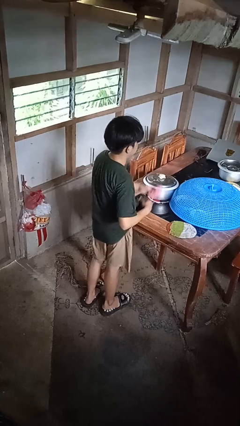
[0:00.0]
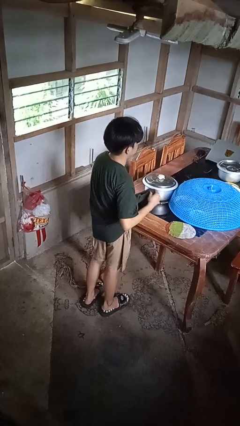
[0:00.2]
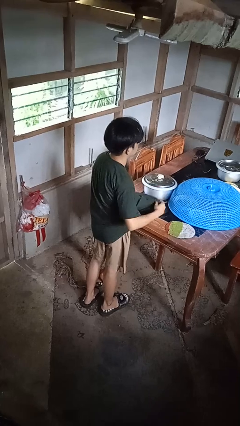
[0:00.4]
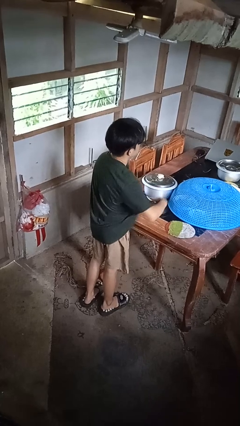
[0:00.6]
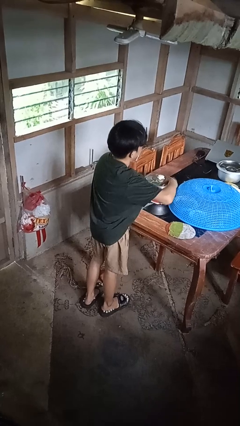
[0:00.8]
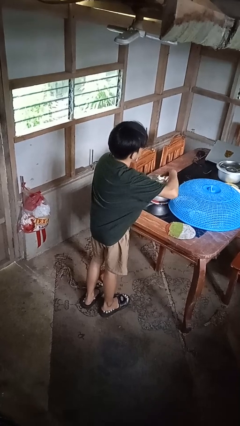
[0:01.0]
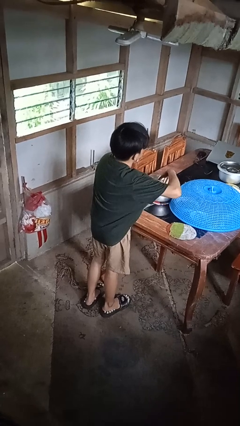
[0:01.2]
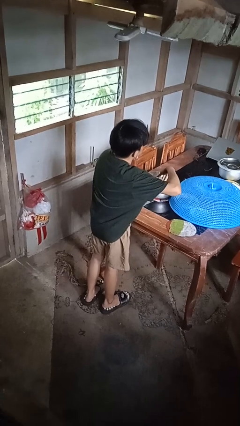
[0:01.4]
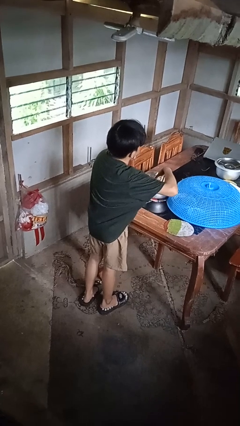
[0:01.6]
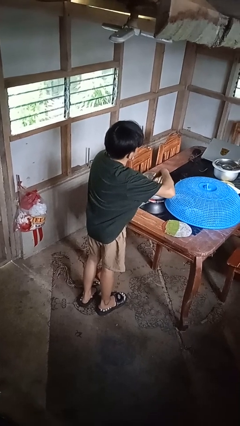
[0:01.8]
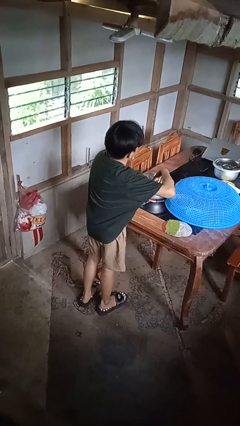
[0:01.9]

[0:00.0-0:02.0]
person applies deodorant

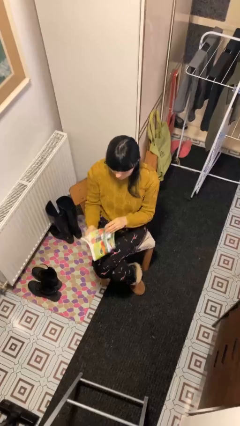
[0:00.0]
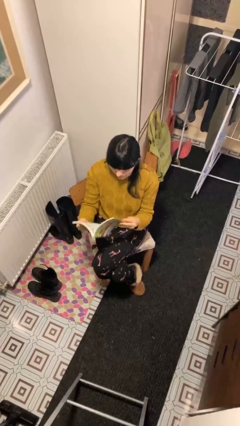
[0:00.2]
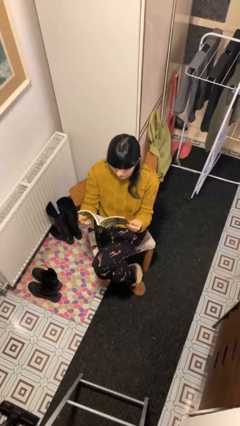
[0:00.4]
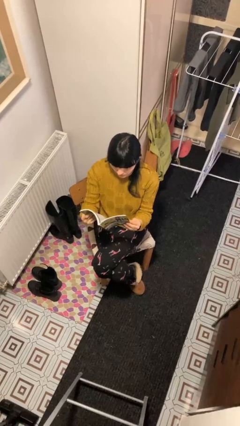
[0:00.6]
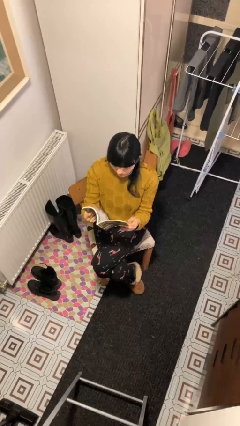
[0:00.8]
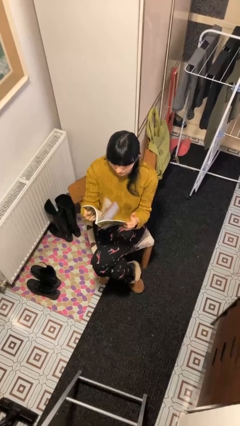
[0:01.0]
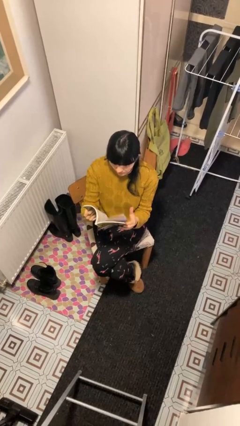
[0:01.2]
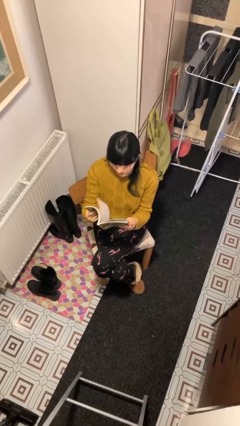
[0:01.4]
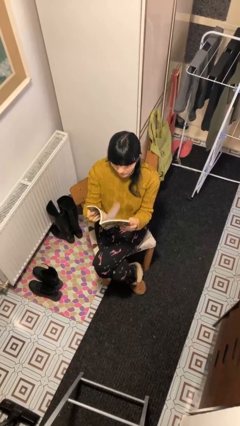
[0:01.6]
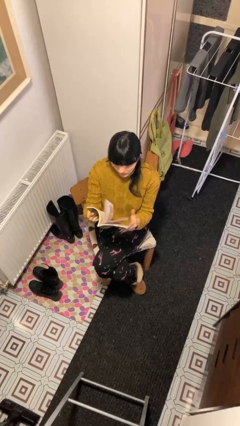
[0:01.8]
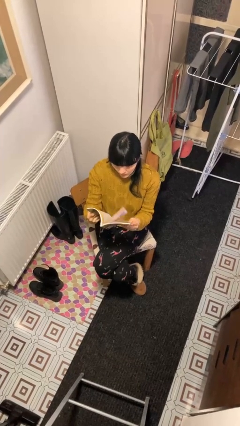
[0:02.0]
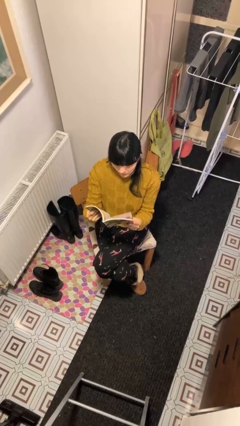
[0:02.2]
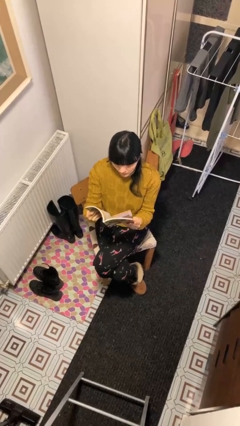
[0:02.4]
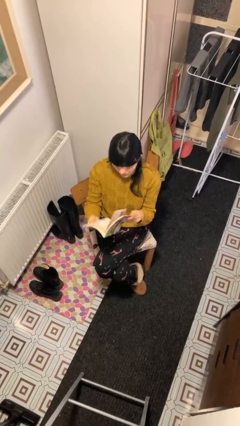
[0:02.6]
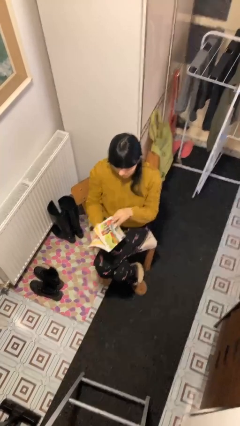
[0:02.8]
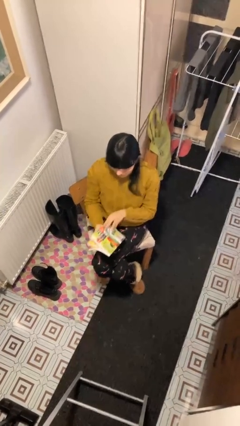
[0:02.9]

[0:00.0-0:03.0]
person reads document

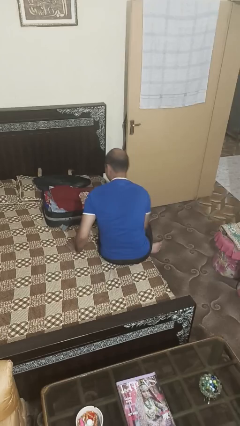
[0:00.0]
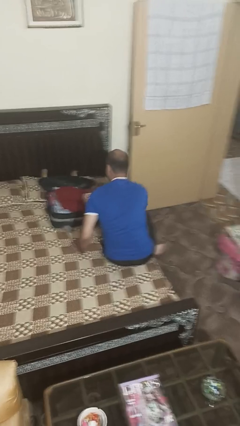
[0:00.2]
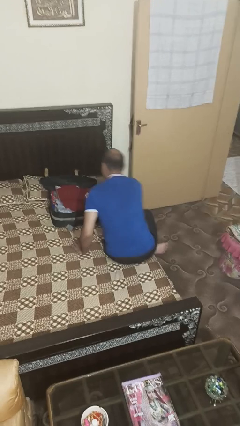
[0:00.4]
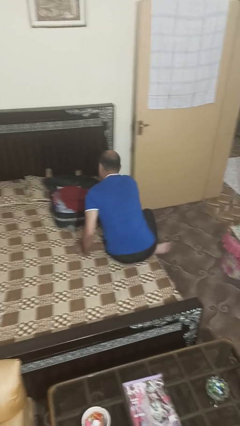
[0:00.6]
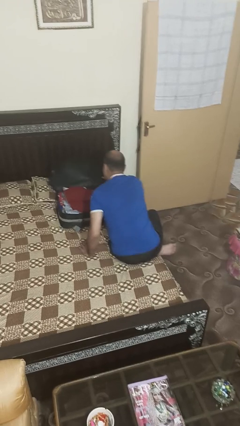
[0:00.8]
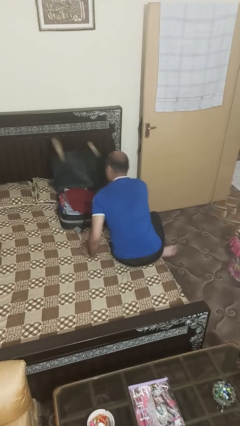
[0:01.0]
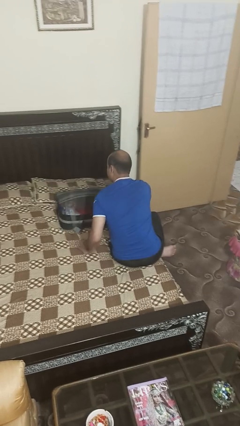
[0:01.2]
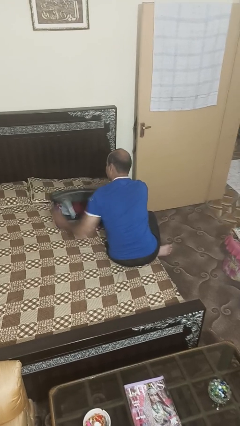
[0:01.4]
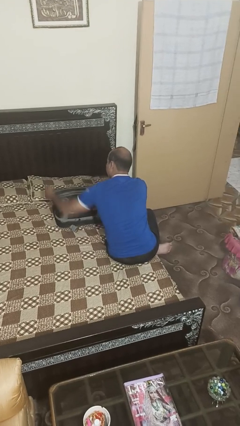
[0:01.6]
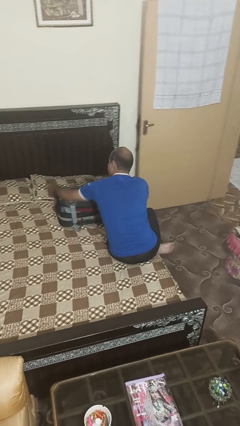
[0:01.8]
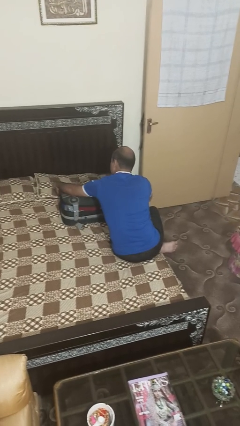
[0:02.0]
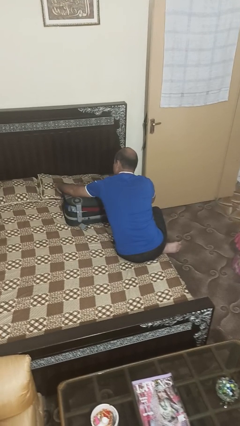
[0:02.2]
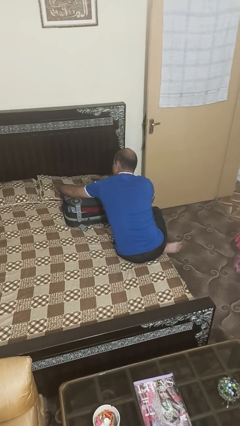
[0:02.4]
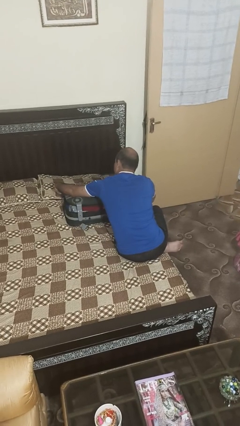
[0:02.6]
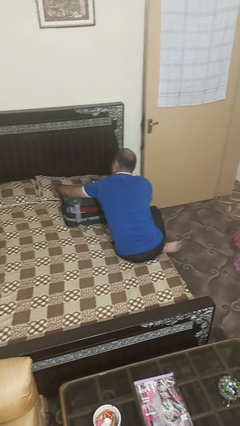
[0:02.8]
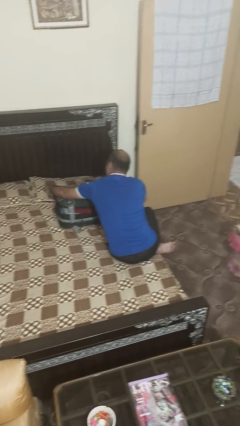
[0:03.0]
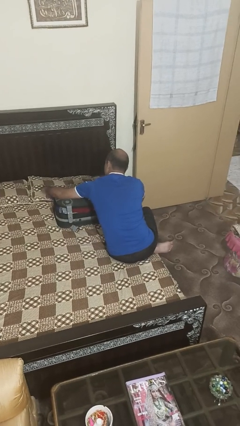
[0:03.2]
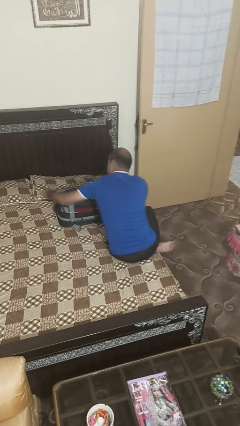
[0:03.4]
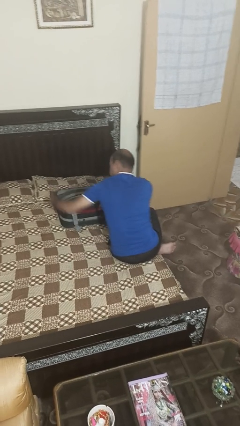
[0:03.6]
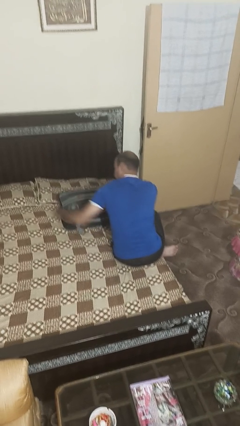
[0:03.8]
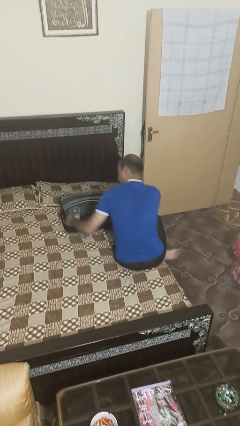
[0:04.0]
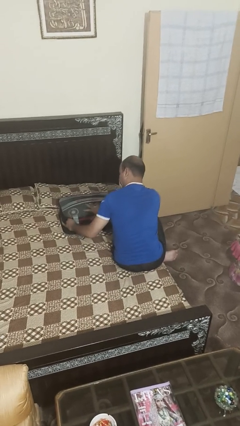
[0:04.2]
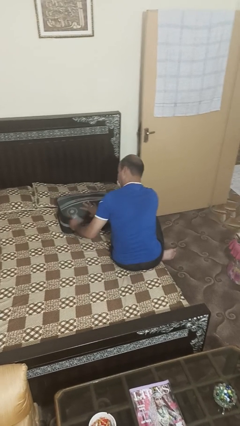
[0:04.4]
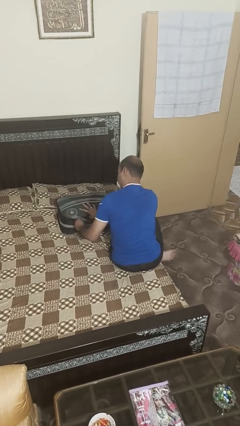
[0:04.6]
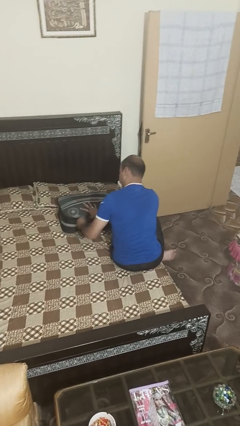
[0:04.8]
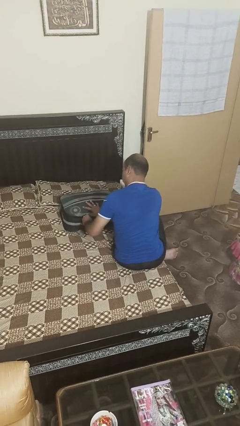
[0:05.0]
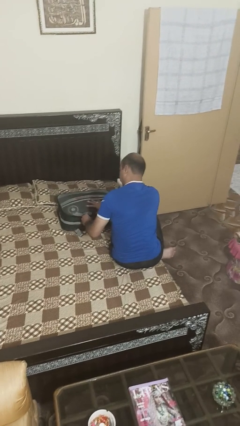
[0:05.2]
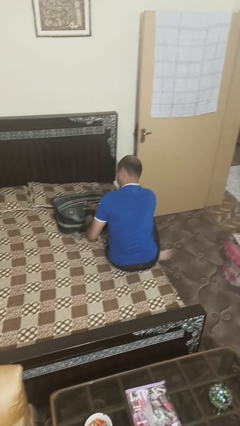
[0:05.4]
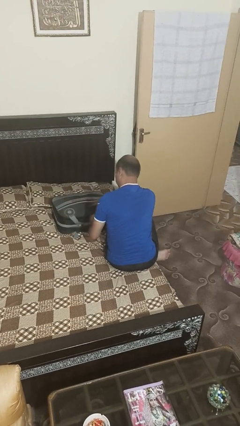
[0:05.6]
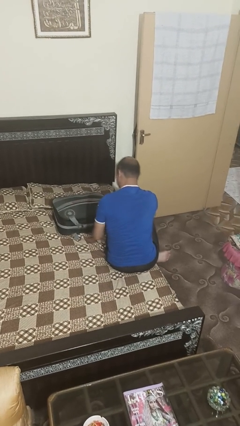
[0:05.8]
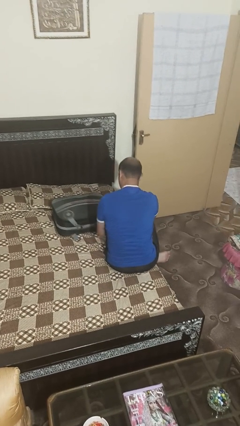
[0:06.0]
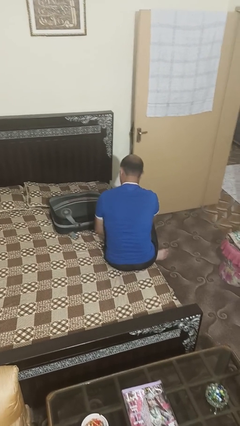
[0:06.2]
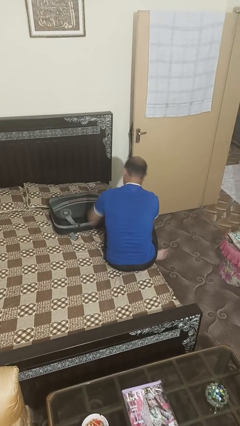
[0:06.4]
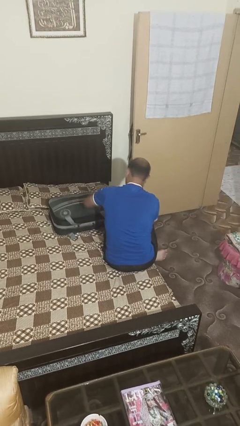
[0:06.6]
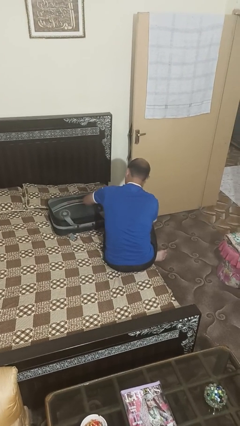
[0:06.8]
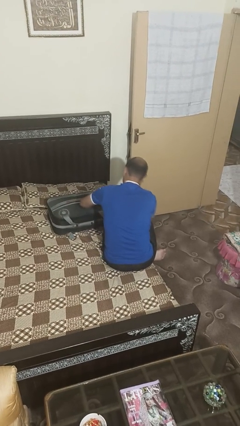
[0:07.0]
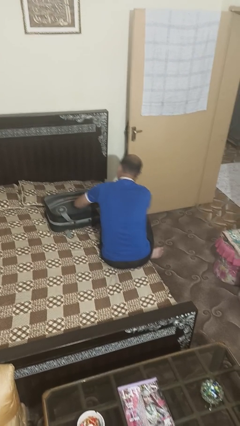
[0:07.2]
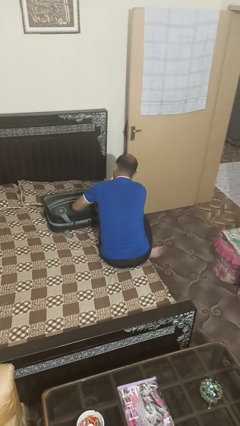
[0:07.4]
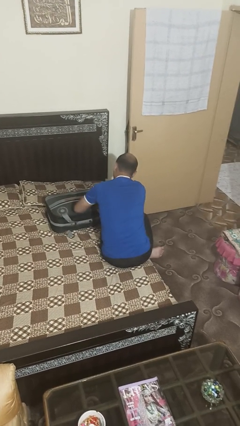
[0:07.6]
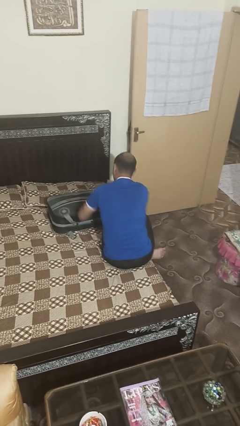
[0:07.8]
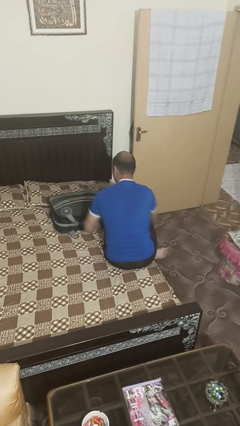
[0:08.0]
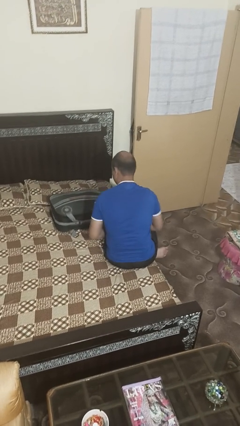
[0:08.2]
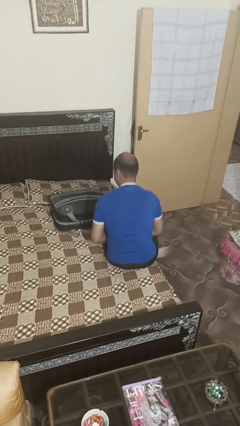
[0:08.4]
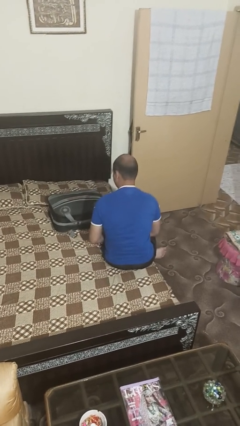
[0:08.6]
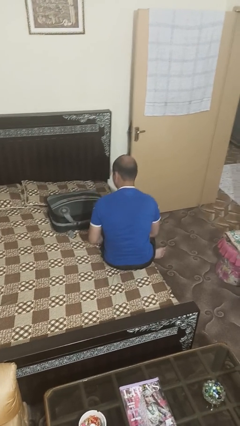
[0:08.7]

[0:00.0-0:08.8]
person closes suitcase

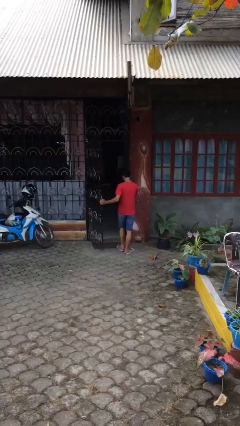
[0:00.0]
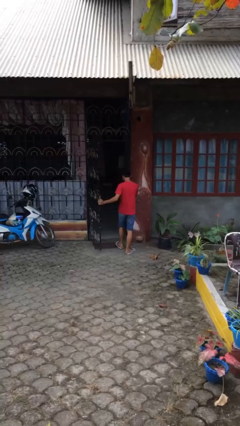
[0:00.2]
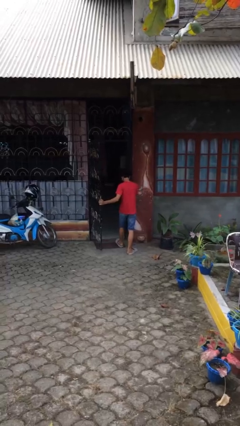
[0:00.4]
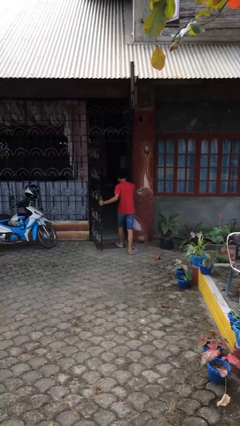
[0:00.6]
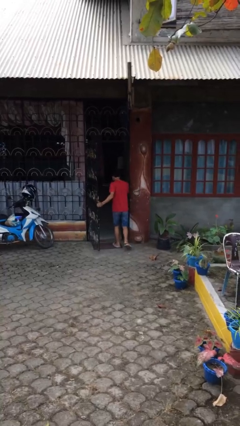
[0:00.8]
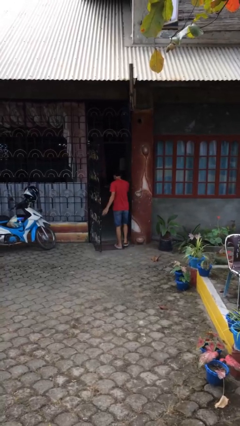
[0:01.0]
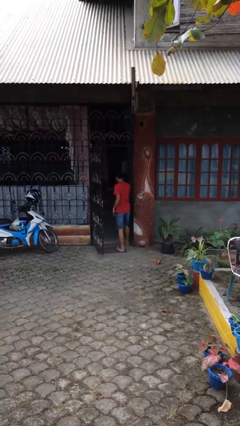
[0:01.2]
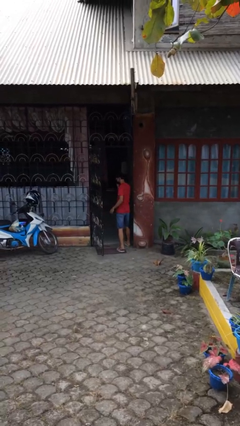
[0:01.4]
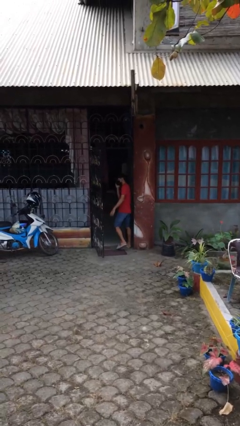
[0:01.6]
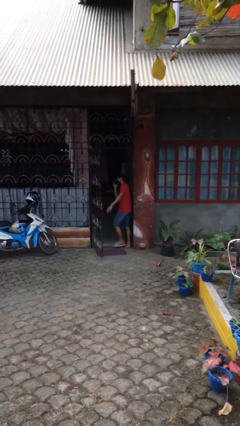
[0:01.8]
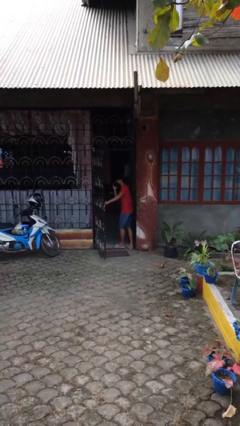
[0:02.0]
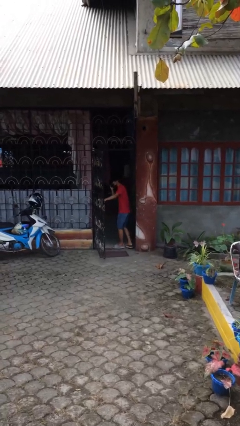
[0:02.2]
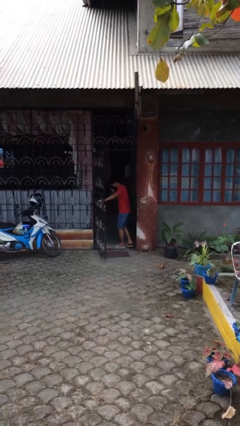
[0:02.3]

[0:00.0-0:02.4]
person exits scene through structure

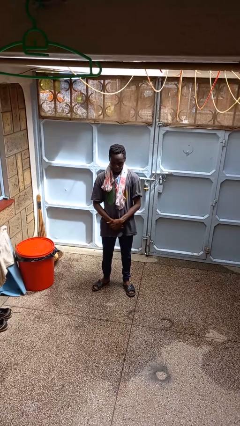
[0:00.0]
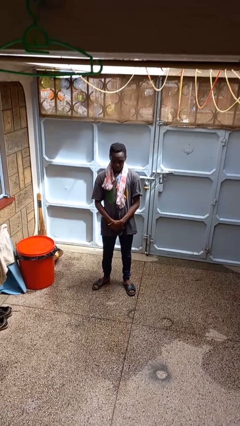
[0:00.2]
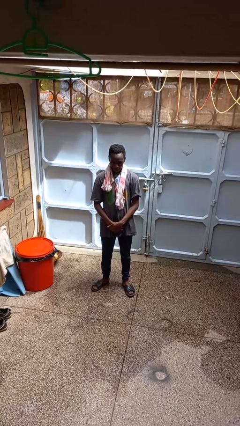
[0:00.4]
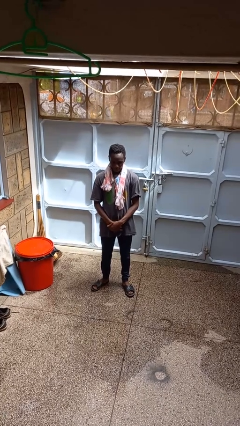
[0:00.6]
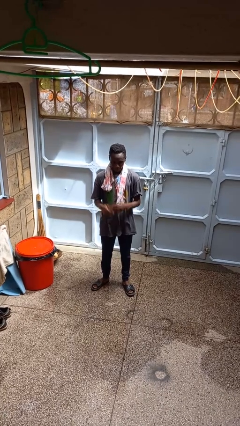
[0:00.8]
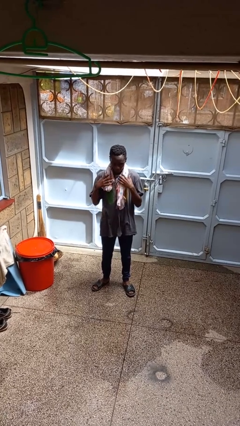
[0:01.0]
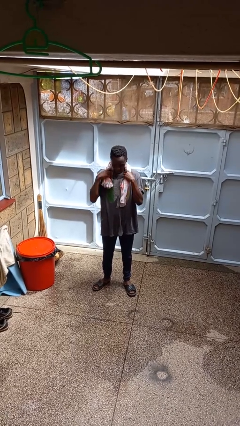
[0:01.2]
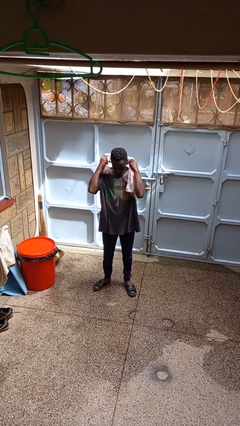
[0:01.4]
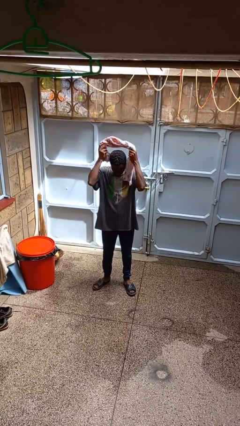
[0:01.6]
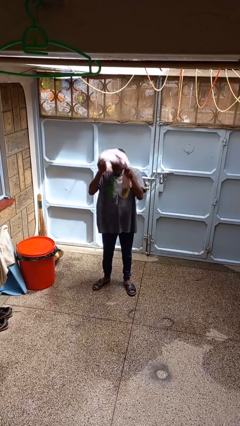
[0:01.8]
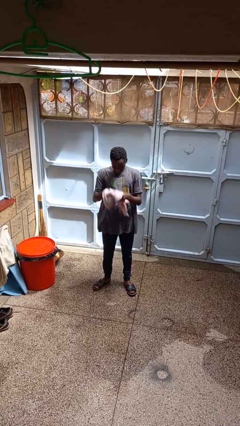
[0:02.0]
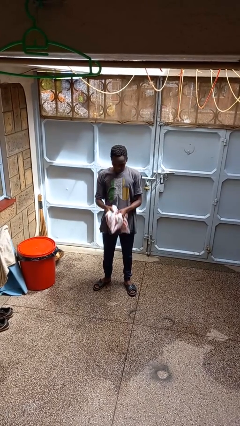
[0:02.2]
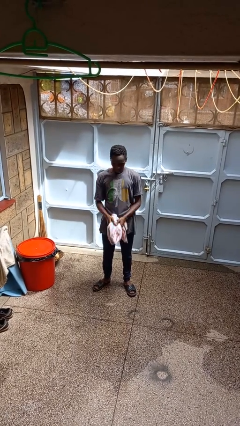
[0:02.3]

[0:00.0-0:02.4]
person takes off scarf
